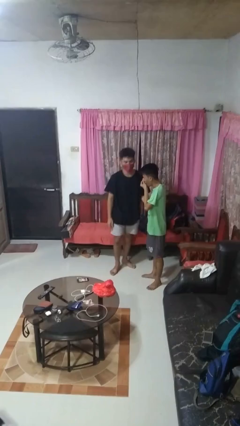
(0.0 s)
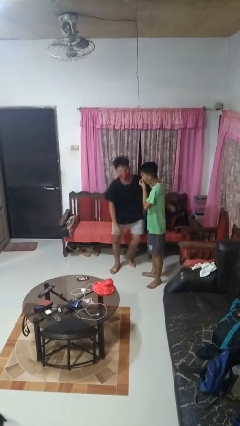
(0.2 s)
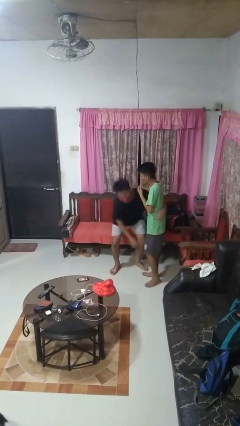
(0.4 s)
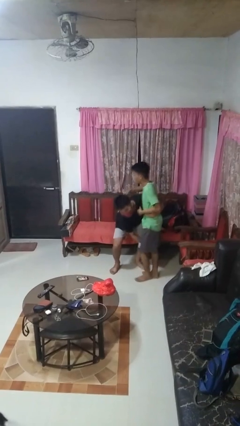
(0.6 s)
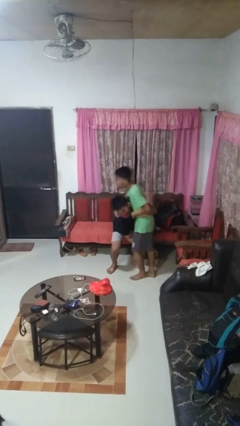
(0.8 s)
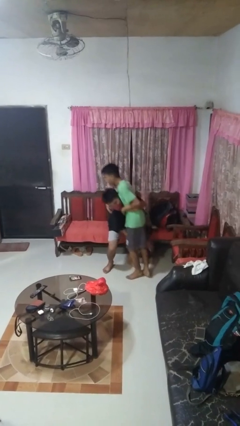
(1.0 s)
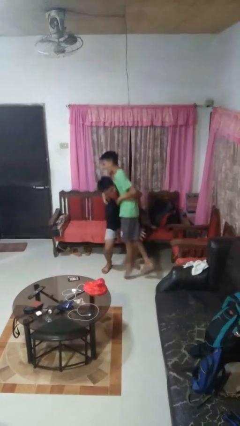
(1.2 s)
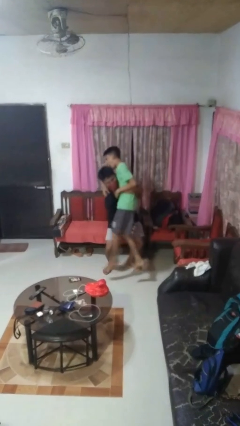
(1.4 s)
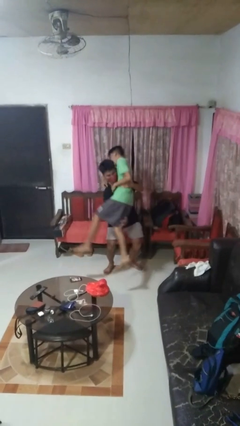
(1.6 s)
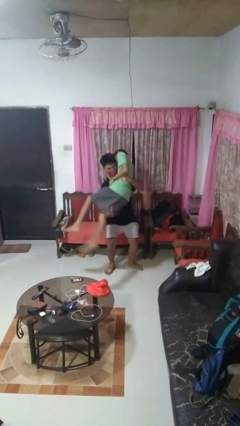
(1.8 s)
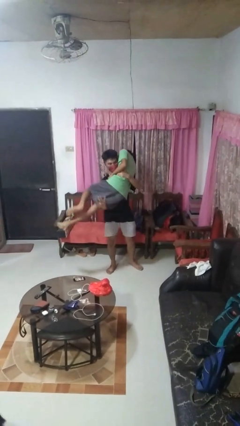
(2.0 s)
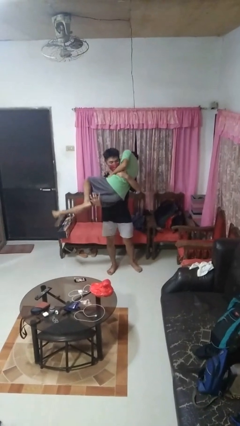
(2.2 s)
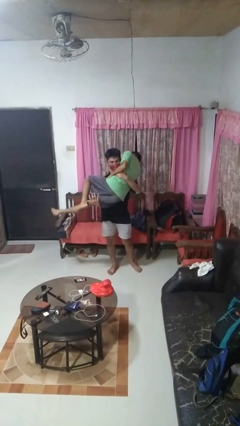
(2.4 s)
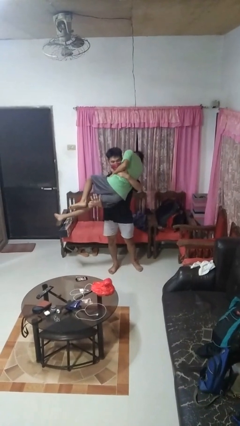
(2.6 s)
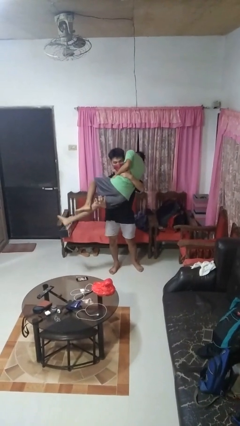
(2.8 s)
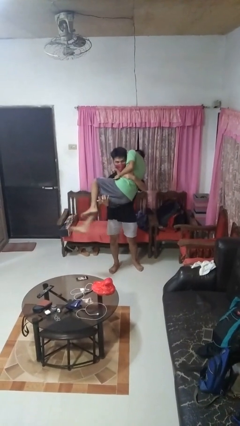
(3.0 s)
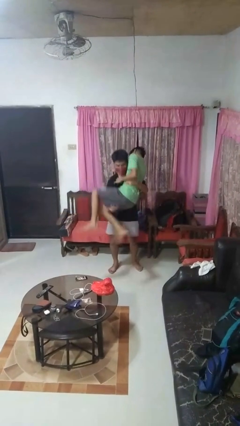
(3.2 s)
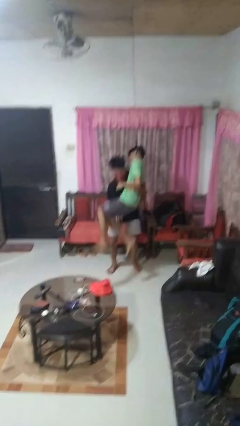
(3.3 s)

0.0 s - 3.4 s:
person picks up person

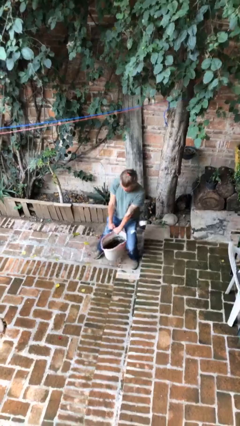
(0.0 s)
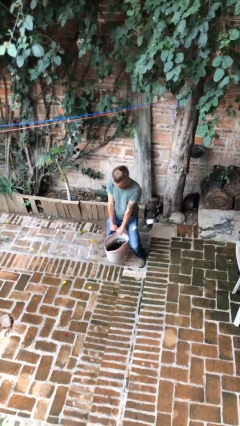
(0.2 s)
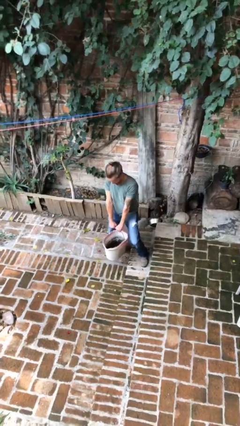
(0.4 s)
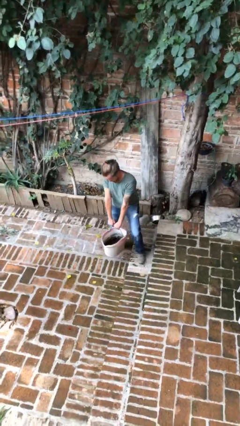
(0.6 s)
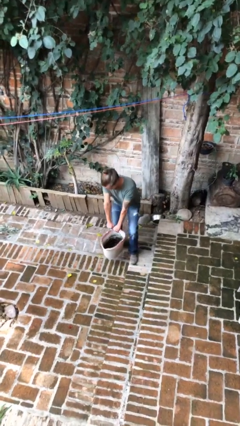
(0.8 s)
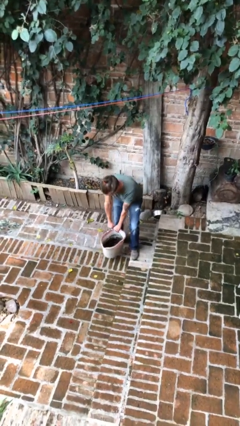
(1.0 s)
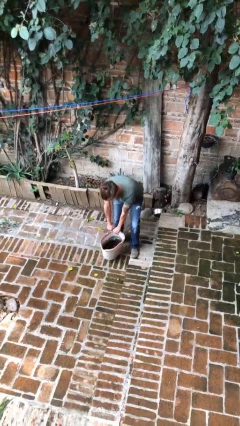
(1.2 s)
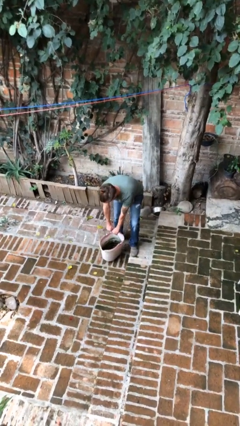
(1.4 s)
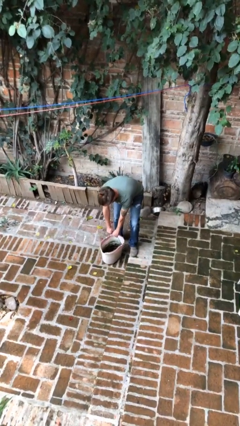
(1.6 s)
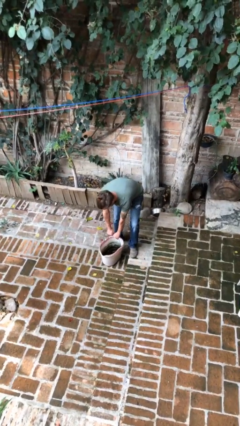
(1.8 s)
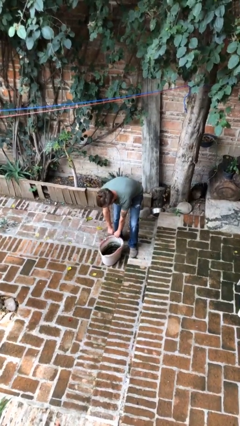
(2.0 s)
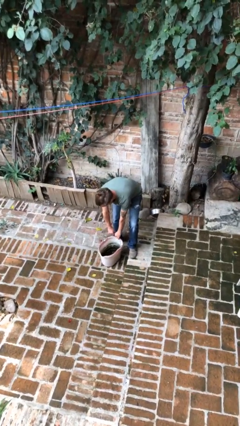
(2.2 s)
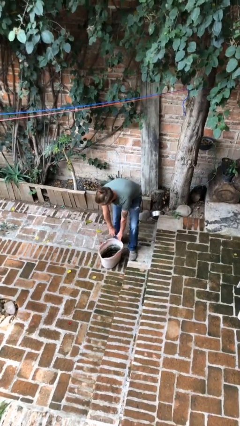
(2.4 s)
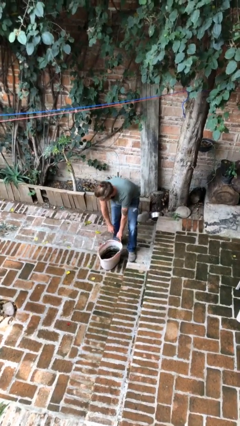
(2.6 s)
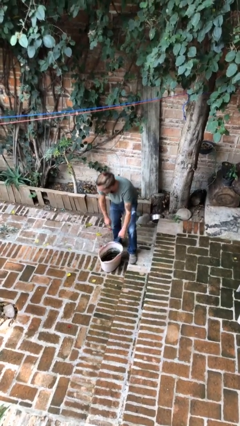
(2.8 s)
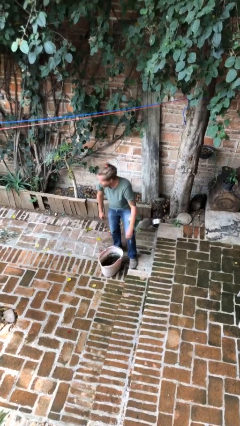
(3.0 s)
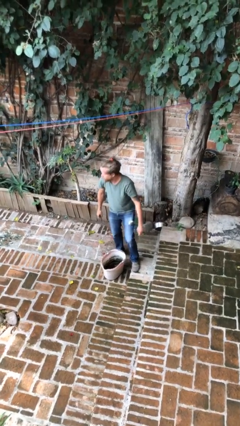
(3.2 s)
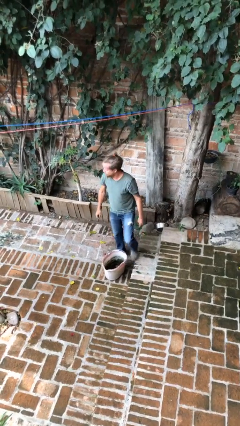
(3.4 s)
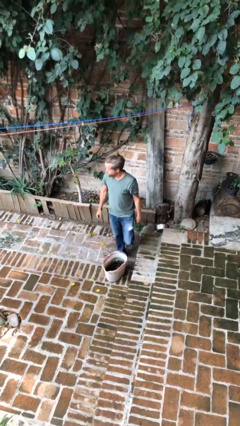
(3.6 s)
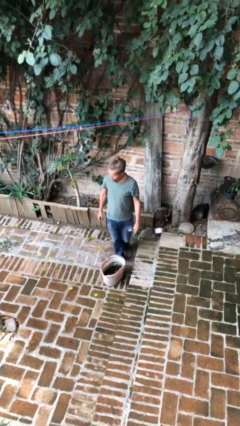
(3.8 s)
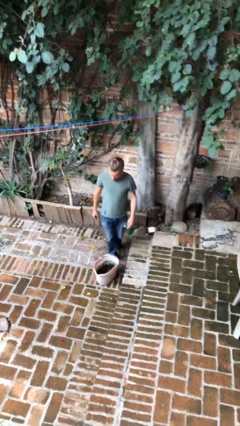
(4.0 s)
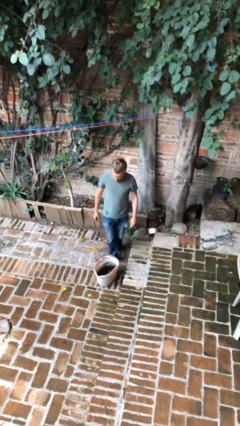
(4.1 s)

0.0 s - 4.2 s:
person puts down object on floor

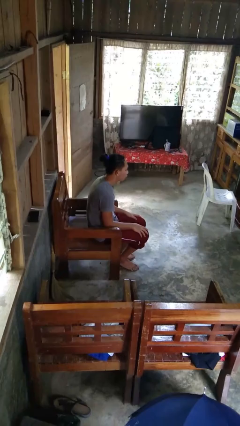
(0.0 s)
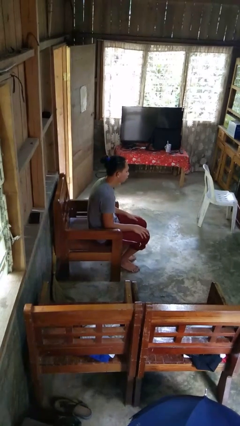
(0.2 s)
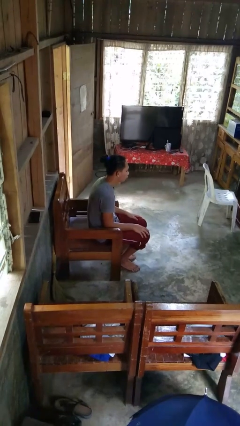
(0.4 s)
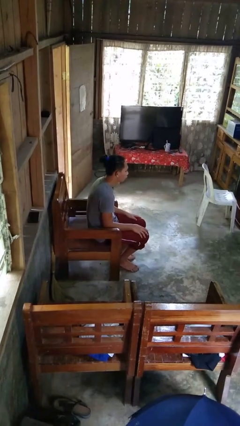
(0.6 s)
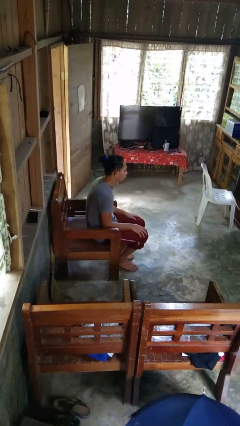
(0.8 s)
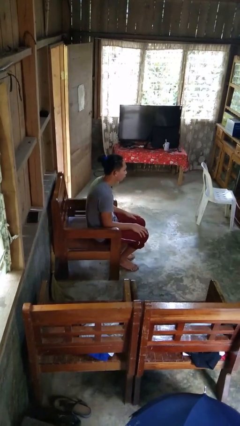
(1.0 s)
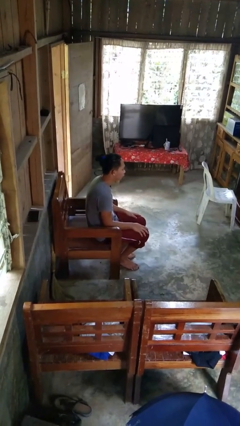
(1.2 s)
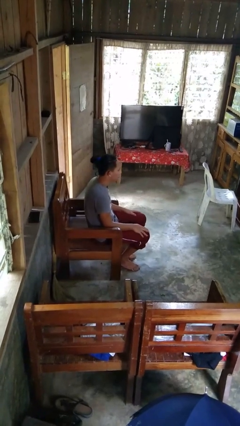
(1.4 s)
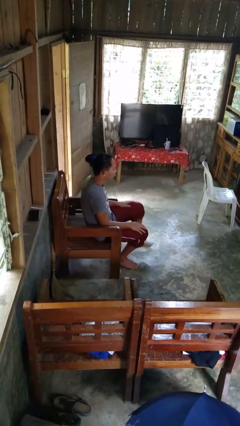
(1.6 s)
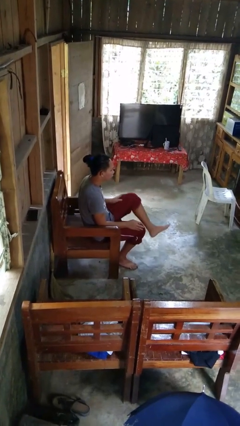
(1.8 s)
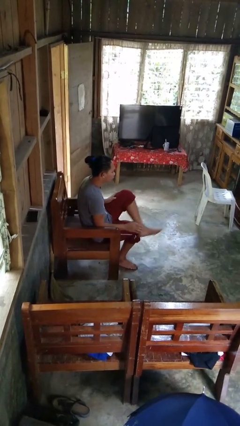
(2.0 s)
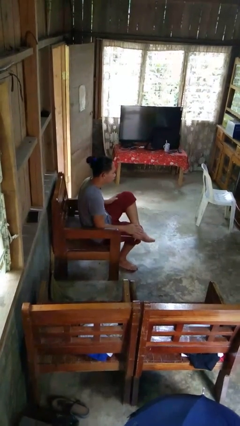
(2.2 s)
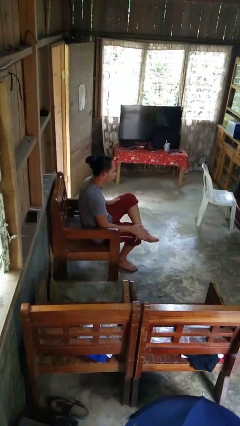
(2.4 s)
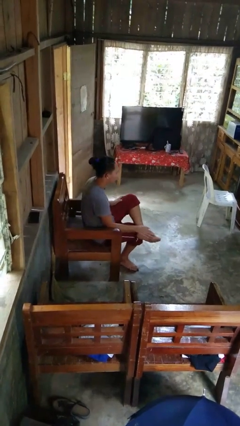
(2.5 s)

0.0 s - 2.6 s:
person rubs foot

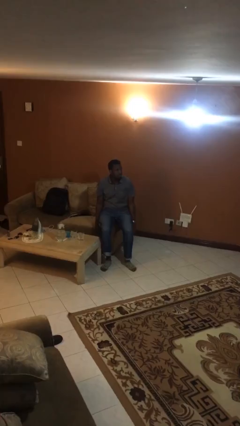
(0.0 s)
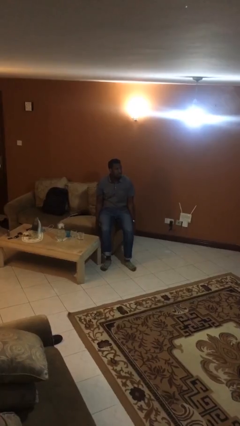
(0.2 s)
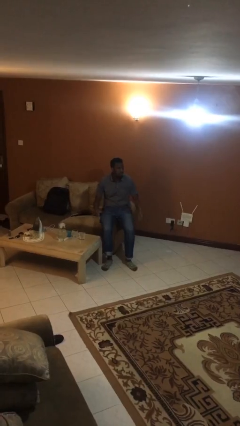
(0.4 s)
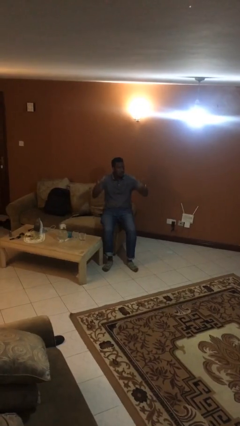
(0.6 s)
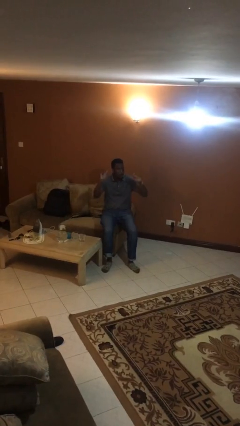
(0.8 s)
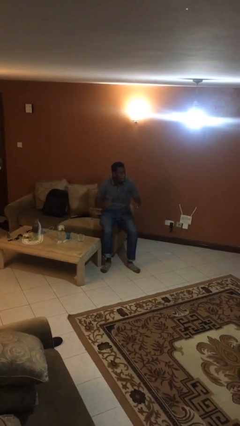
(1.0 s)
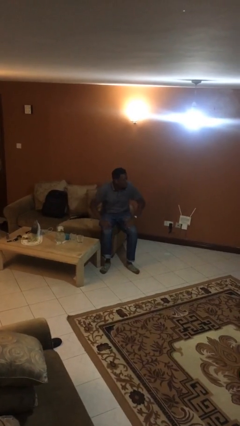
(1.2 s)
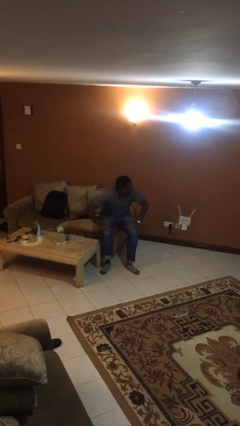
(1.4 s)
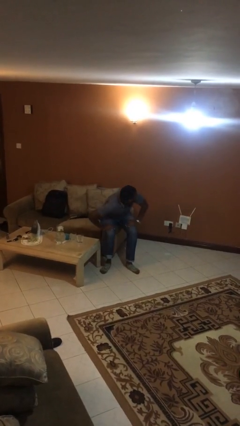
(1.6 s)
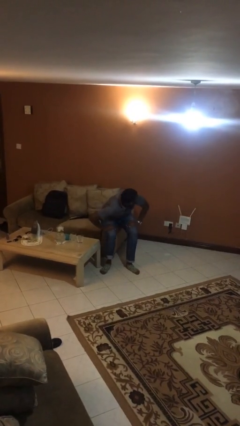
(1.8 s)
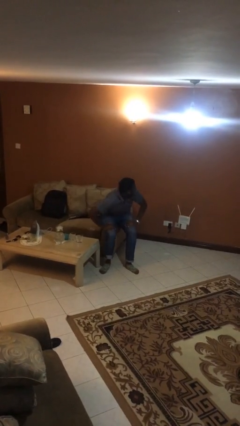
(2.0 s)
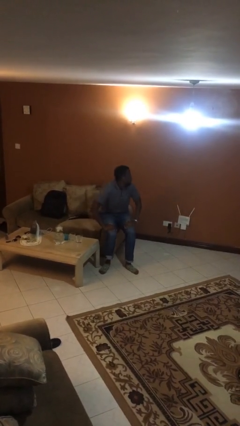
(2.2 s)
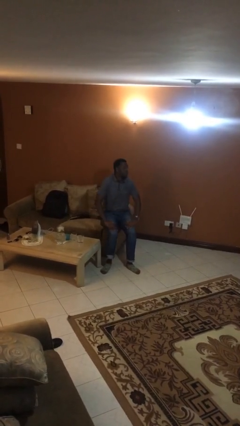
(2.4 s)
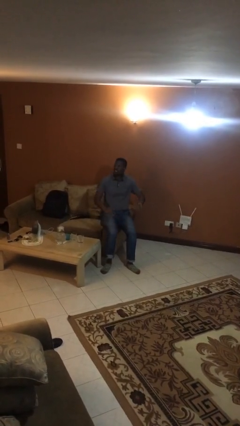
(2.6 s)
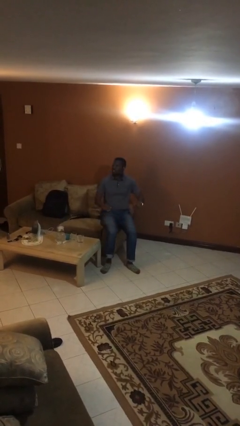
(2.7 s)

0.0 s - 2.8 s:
person slaps hands on thighs

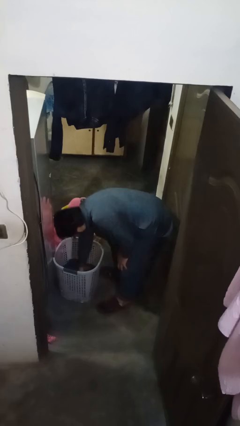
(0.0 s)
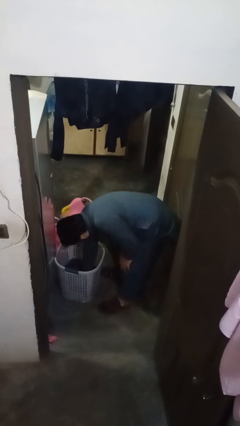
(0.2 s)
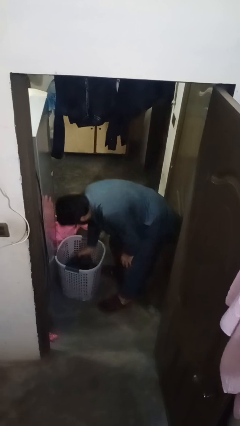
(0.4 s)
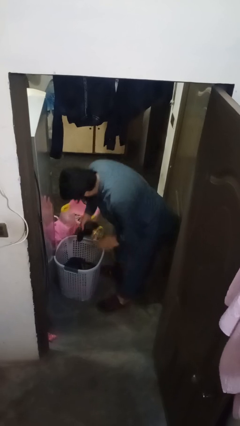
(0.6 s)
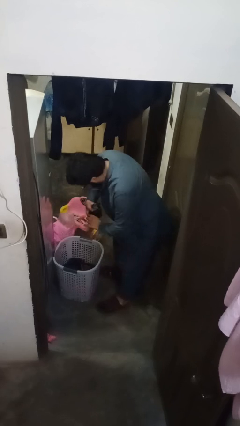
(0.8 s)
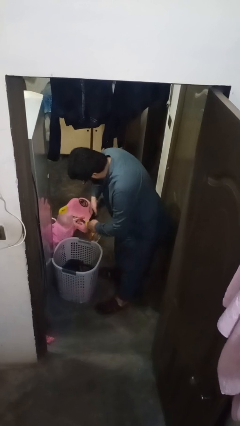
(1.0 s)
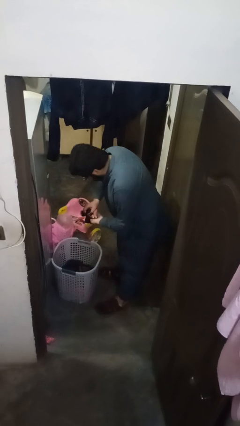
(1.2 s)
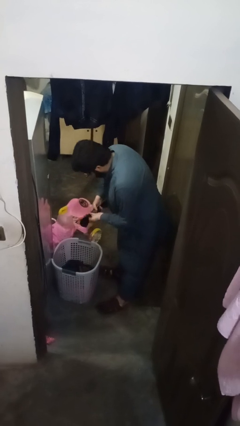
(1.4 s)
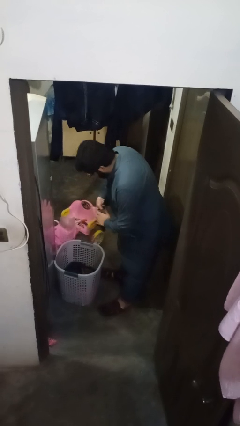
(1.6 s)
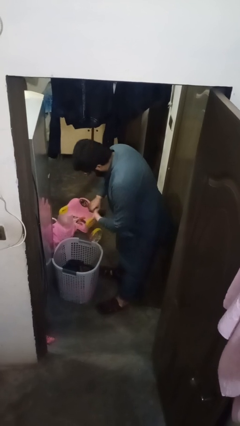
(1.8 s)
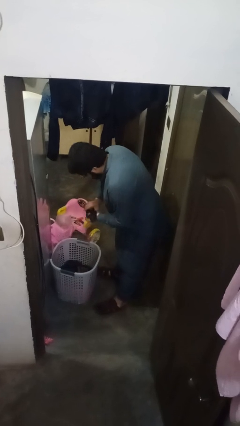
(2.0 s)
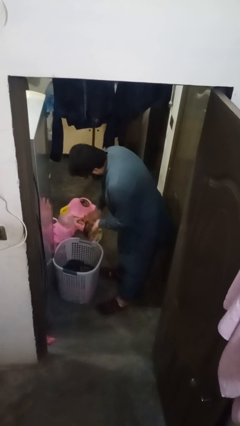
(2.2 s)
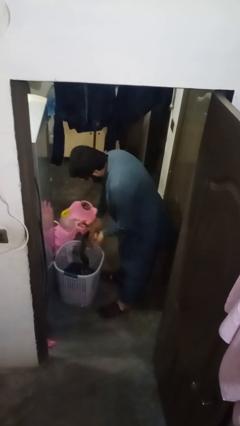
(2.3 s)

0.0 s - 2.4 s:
person folds socks

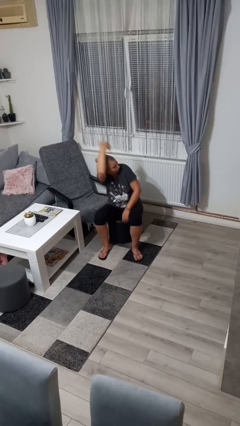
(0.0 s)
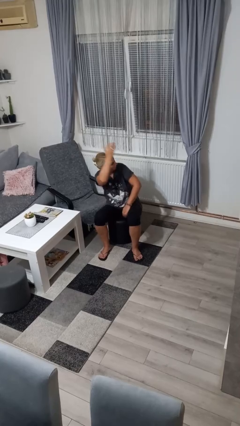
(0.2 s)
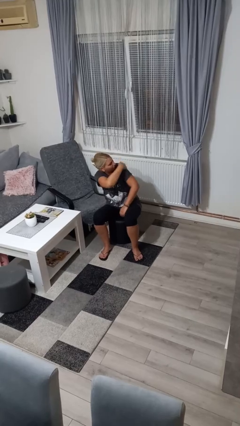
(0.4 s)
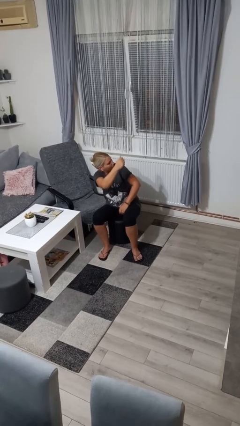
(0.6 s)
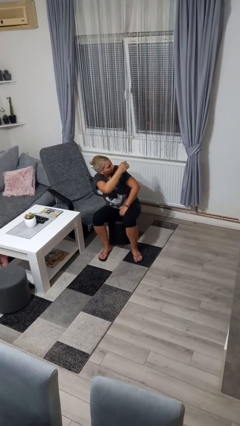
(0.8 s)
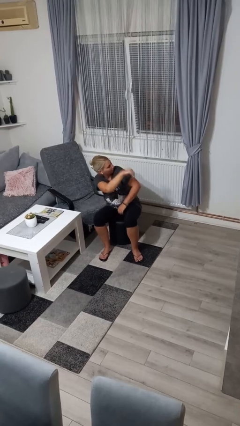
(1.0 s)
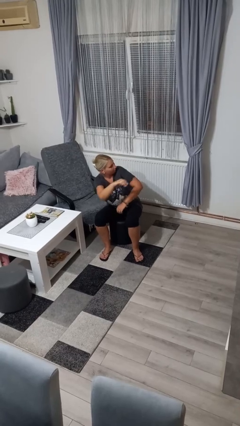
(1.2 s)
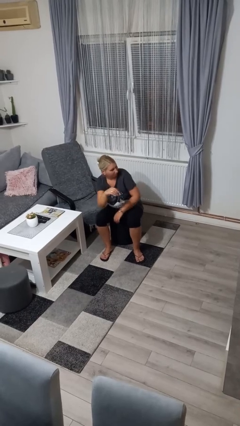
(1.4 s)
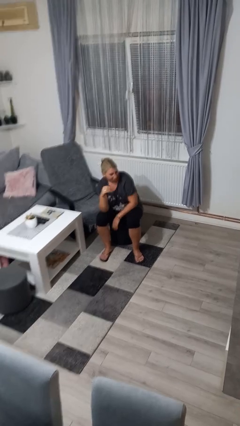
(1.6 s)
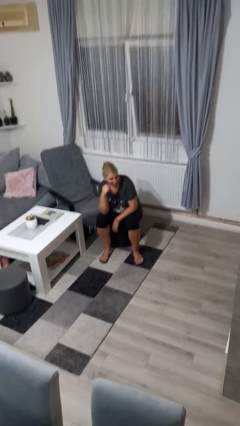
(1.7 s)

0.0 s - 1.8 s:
person swats bug
